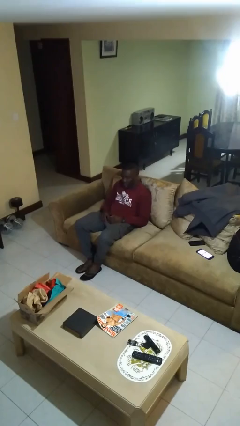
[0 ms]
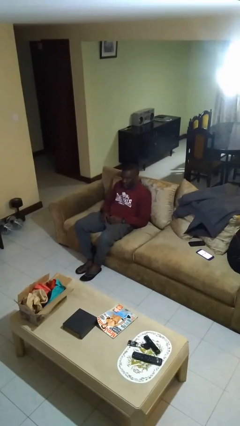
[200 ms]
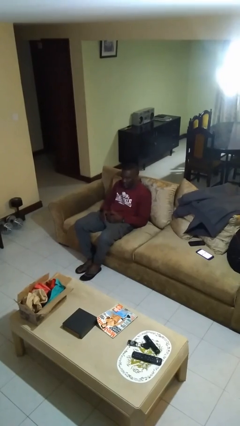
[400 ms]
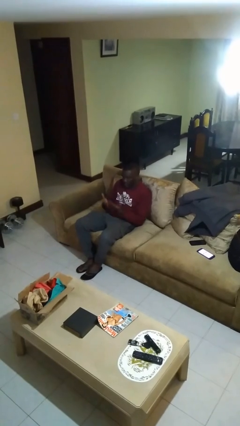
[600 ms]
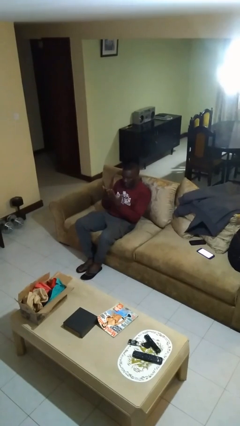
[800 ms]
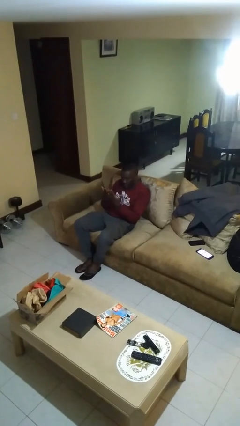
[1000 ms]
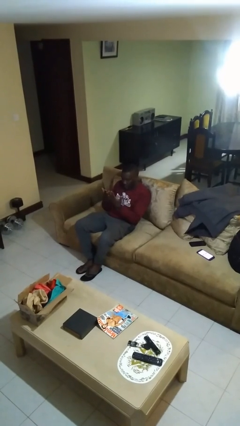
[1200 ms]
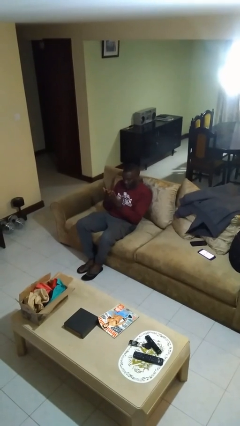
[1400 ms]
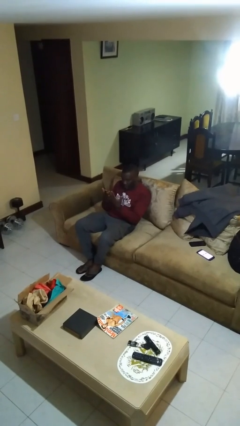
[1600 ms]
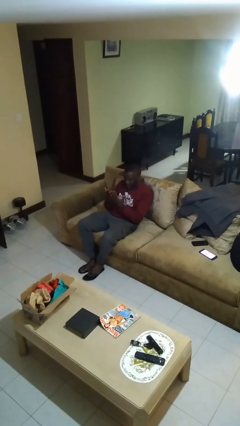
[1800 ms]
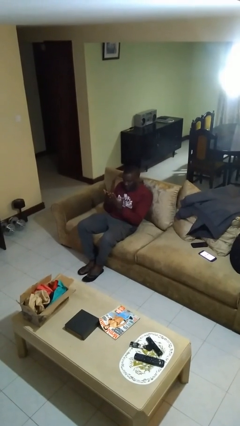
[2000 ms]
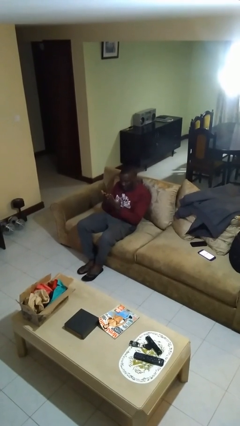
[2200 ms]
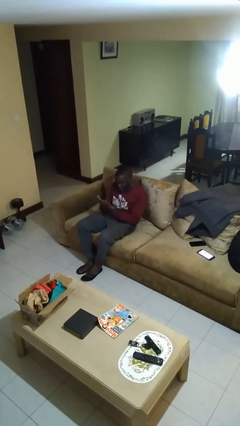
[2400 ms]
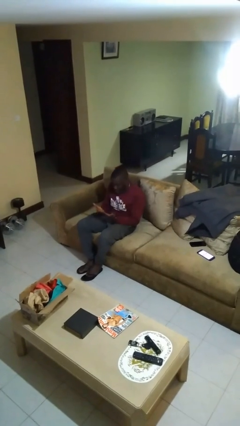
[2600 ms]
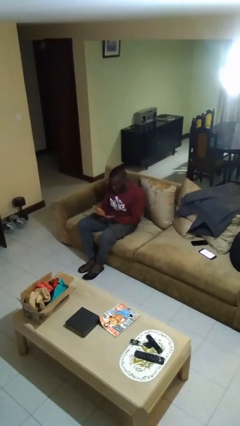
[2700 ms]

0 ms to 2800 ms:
person looks at hands in lap

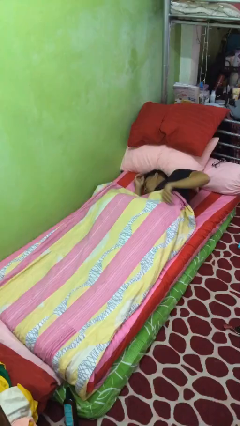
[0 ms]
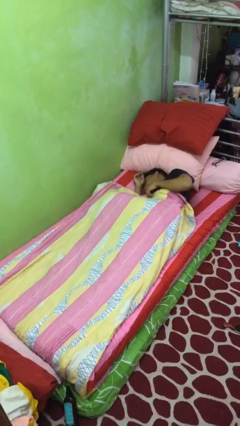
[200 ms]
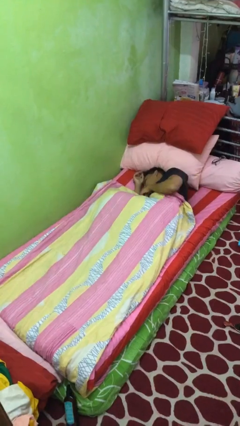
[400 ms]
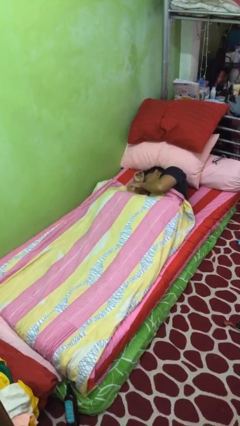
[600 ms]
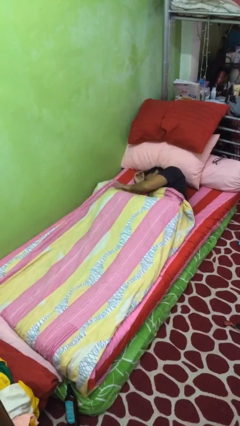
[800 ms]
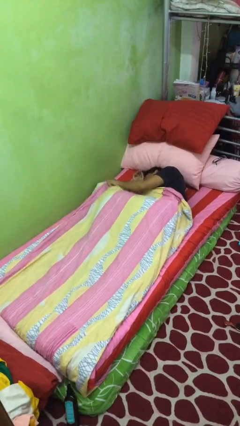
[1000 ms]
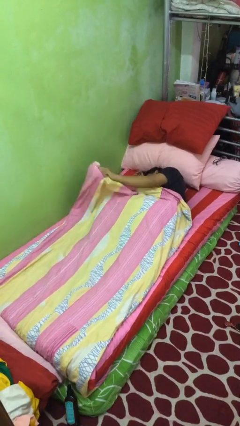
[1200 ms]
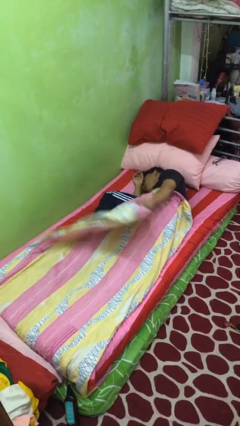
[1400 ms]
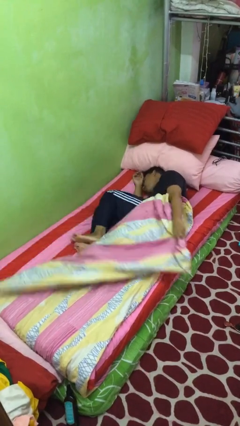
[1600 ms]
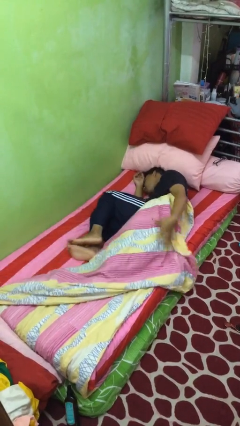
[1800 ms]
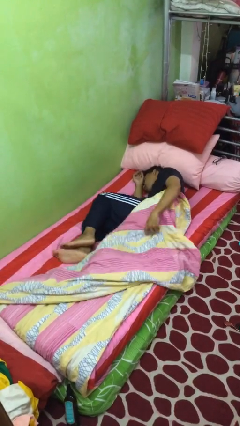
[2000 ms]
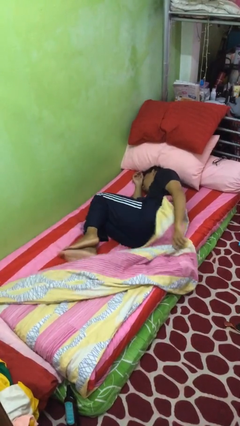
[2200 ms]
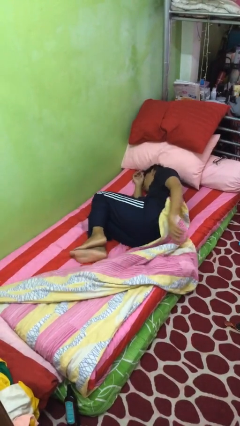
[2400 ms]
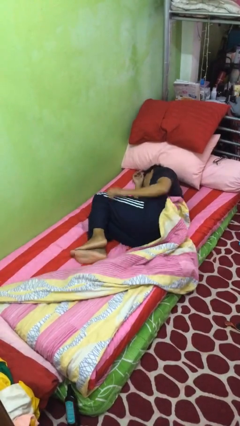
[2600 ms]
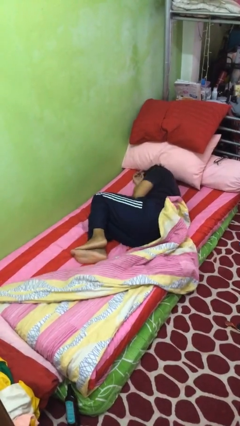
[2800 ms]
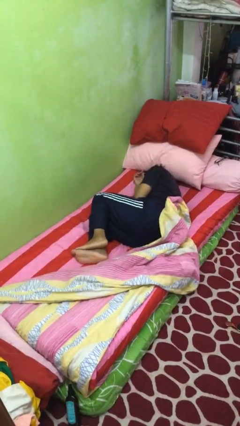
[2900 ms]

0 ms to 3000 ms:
person uncovers with bedsheets

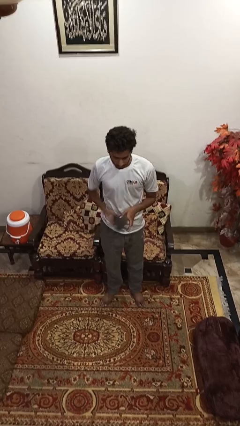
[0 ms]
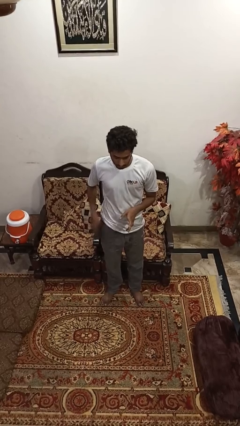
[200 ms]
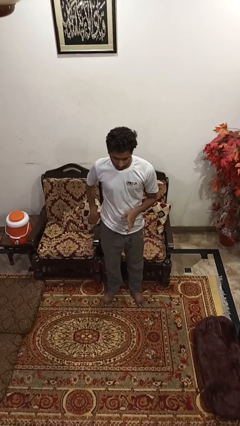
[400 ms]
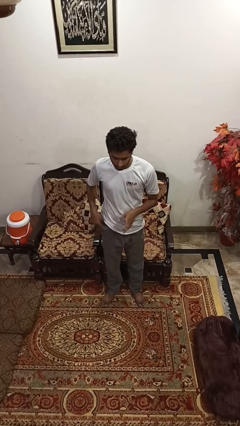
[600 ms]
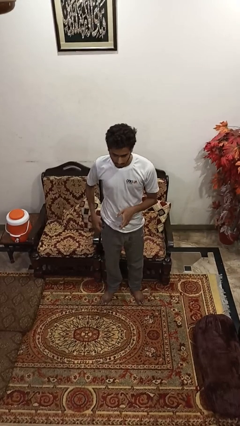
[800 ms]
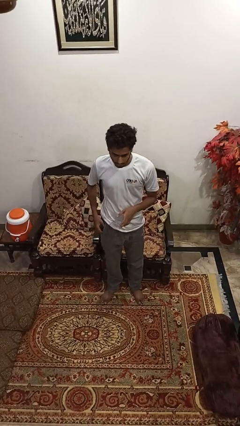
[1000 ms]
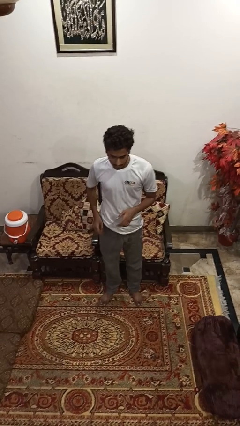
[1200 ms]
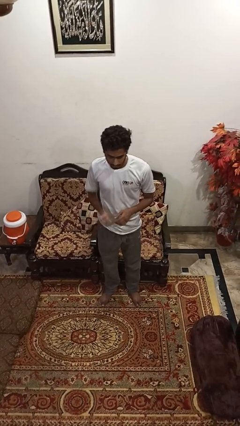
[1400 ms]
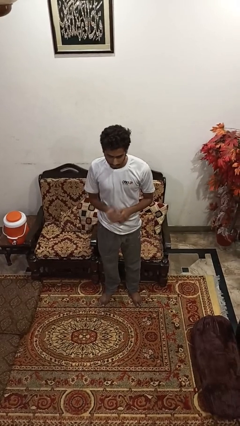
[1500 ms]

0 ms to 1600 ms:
person puts phone into pocket

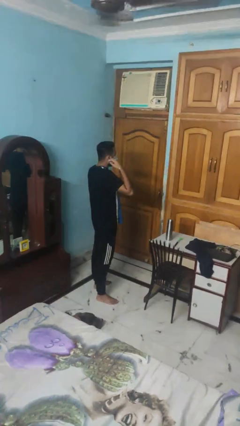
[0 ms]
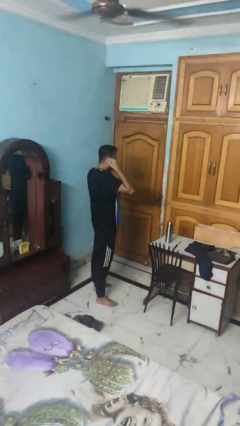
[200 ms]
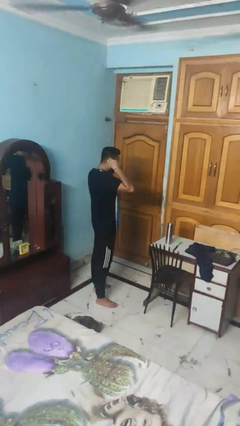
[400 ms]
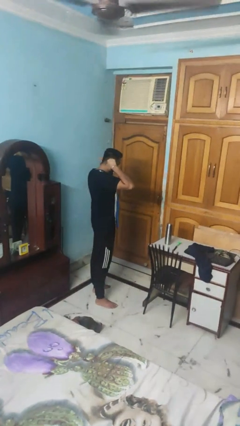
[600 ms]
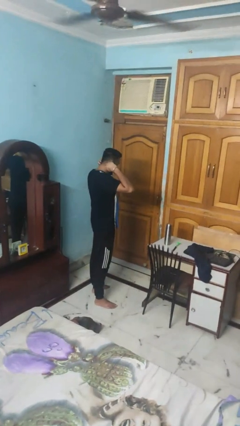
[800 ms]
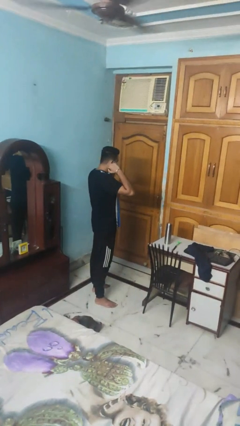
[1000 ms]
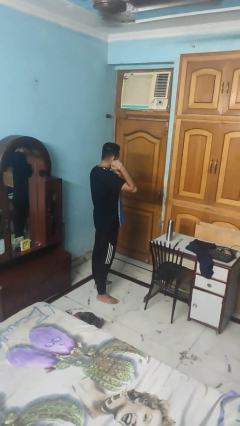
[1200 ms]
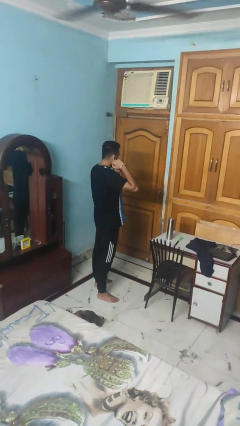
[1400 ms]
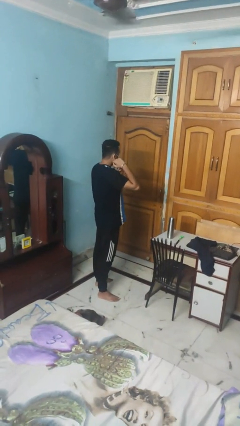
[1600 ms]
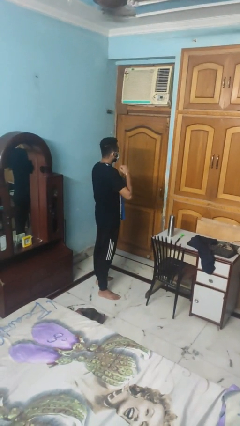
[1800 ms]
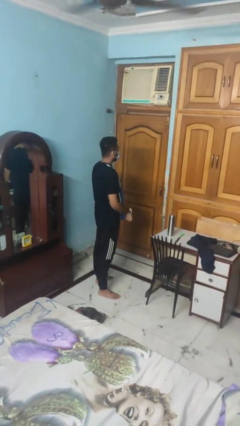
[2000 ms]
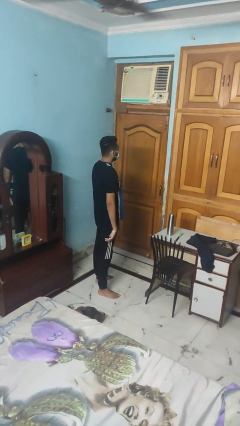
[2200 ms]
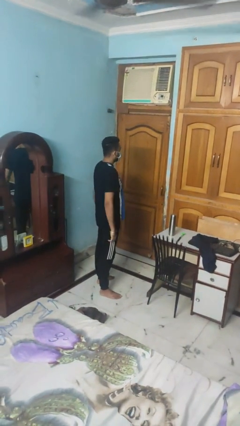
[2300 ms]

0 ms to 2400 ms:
person puts on facemask

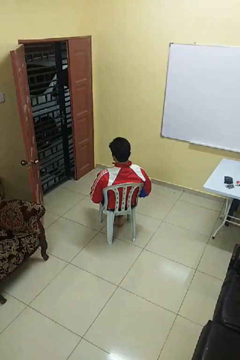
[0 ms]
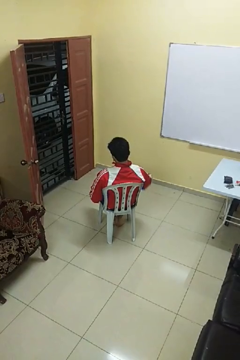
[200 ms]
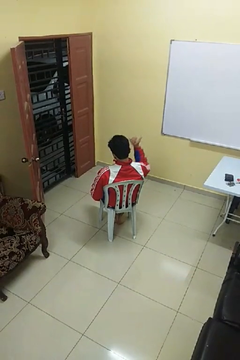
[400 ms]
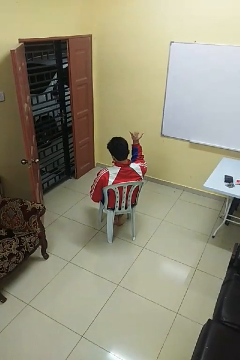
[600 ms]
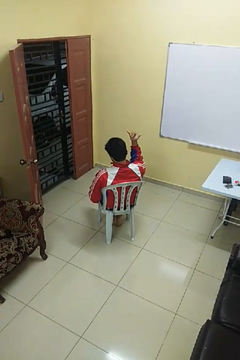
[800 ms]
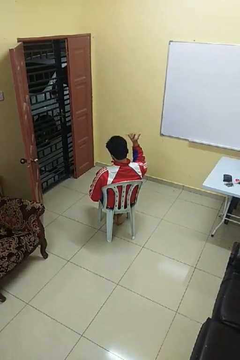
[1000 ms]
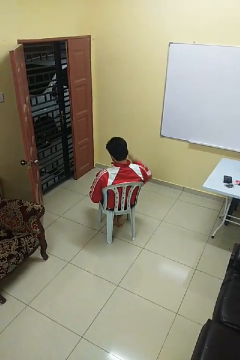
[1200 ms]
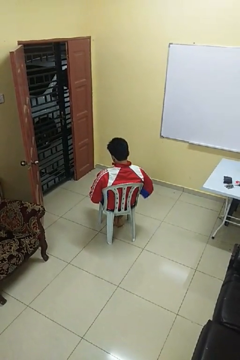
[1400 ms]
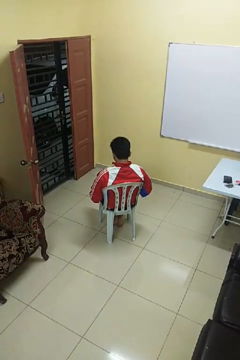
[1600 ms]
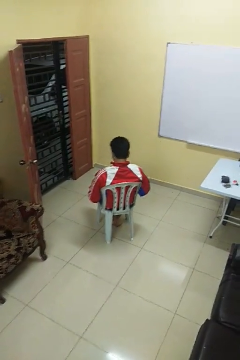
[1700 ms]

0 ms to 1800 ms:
person gestures hang loose

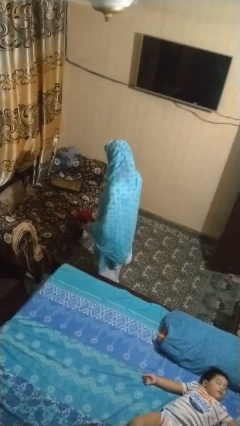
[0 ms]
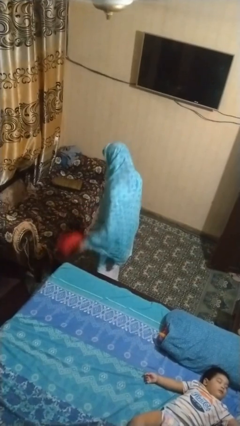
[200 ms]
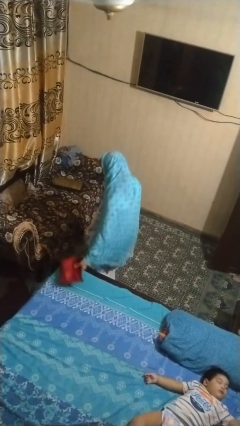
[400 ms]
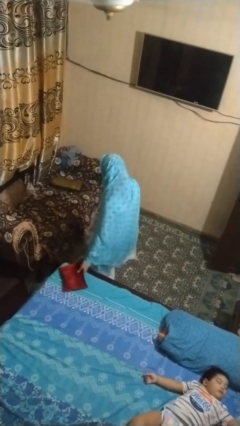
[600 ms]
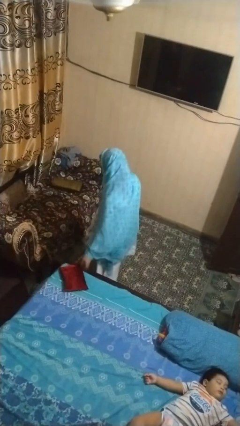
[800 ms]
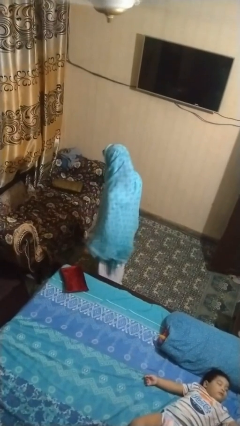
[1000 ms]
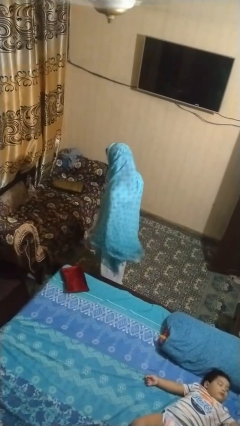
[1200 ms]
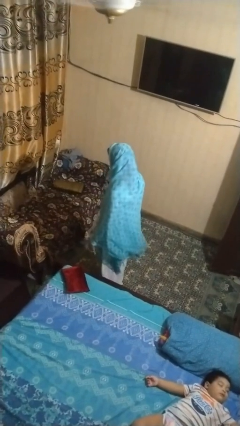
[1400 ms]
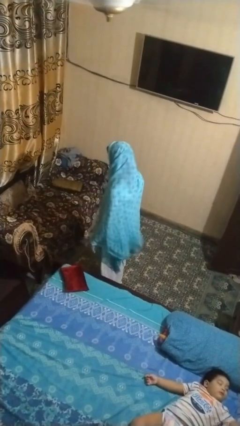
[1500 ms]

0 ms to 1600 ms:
person puts down object on bed

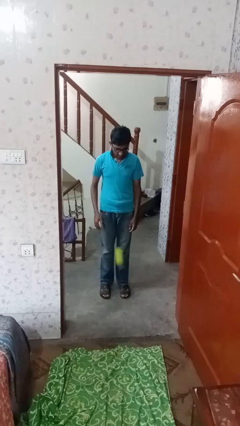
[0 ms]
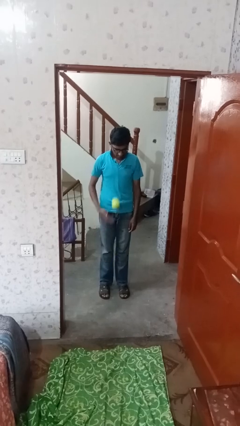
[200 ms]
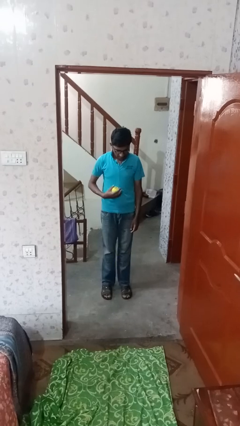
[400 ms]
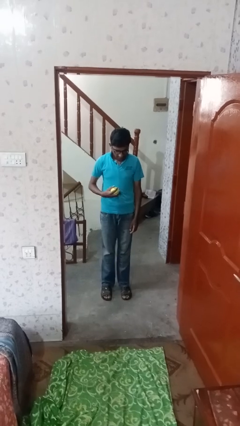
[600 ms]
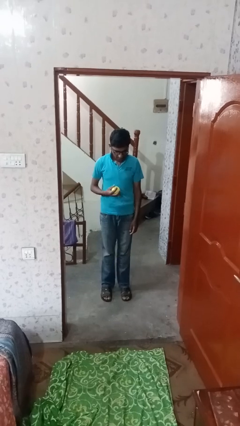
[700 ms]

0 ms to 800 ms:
person bounces ball on floor

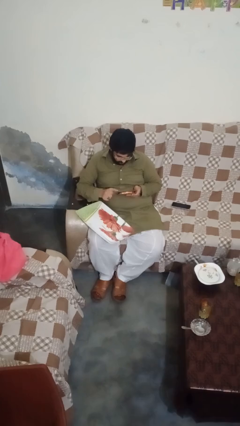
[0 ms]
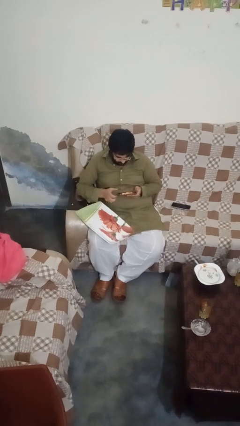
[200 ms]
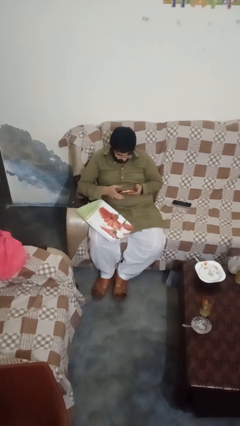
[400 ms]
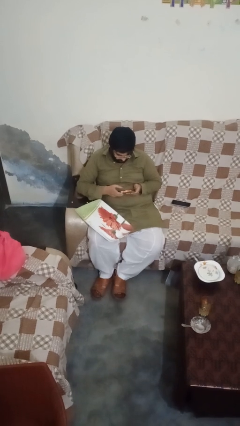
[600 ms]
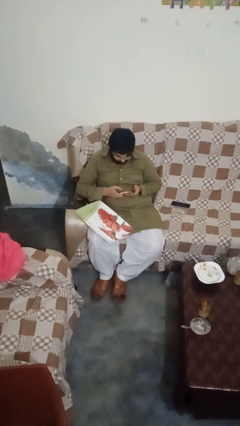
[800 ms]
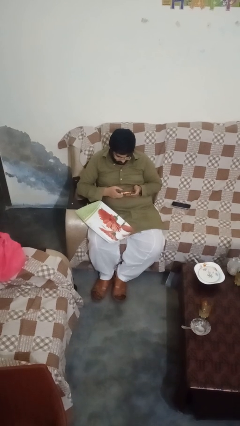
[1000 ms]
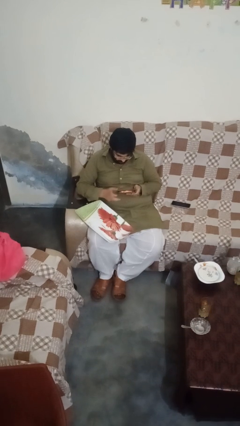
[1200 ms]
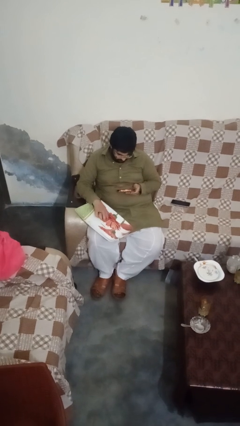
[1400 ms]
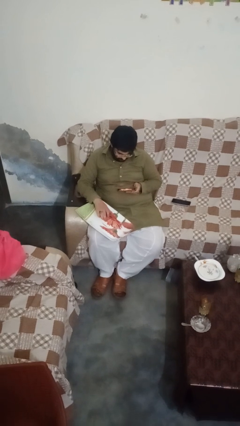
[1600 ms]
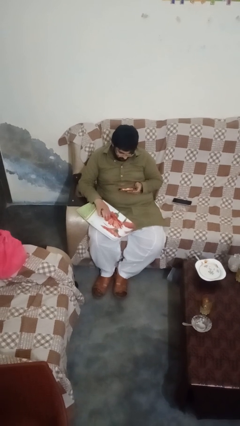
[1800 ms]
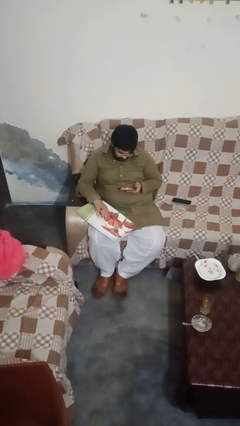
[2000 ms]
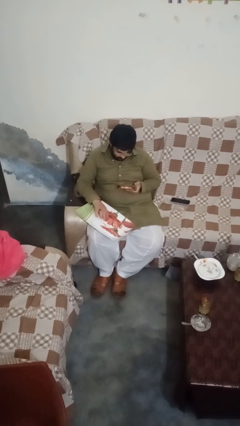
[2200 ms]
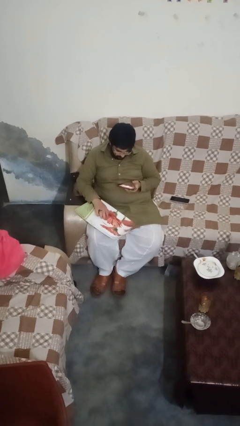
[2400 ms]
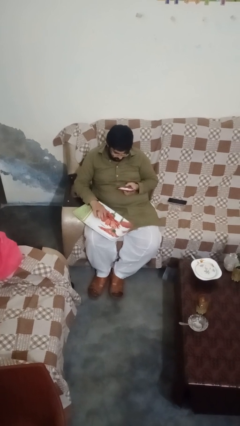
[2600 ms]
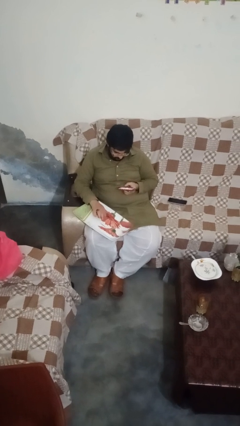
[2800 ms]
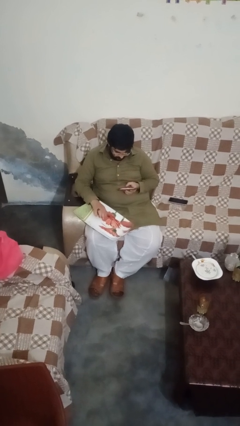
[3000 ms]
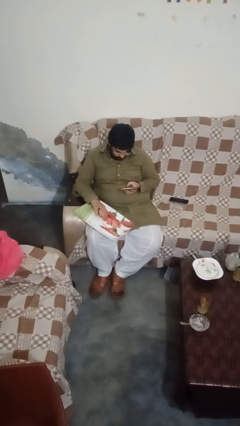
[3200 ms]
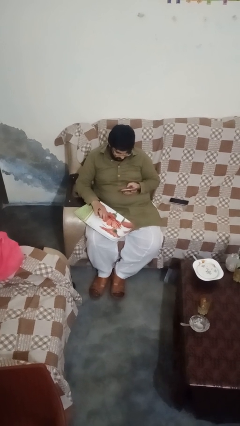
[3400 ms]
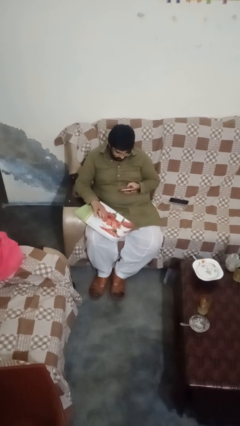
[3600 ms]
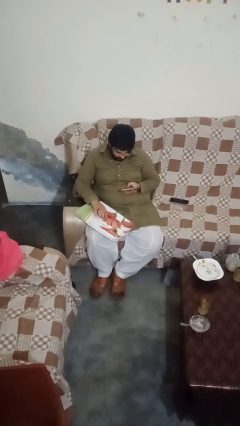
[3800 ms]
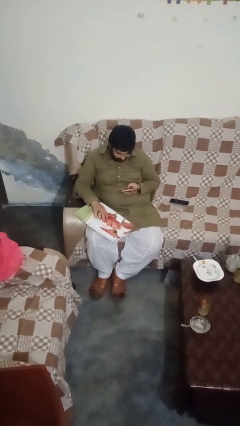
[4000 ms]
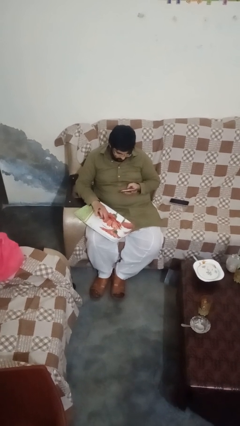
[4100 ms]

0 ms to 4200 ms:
person taps object with finger
